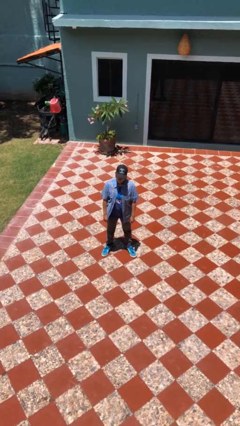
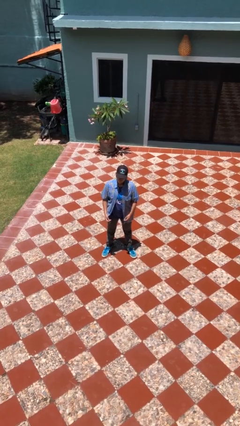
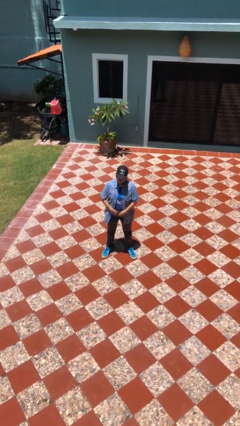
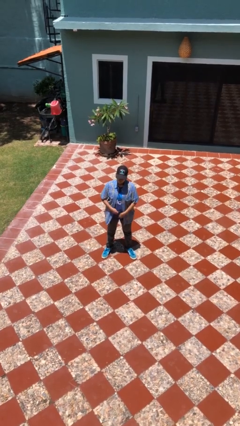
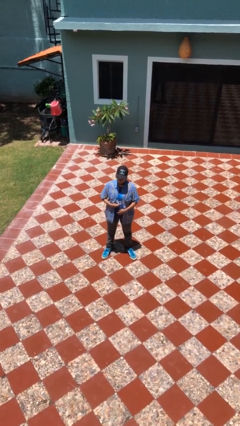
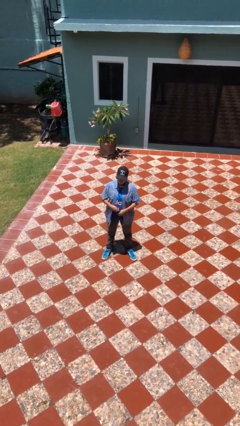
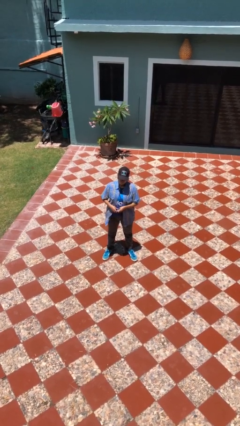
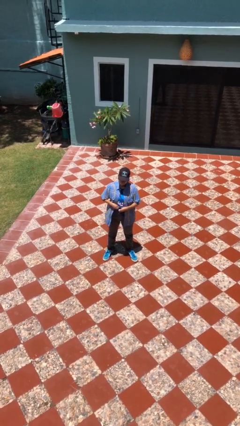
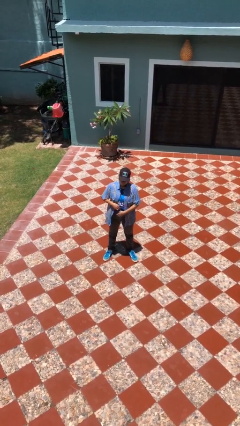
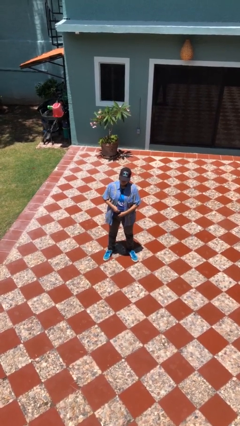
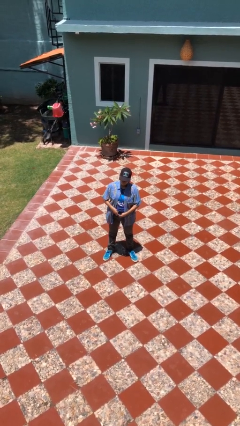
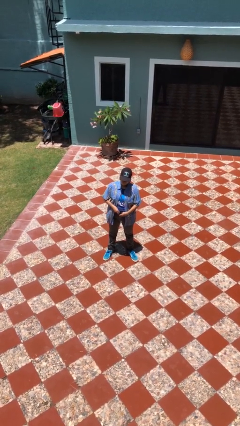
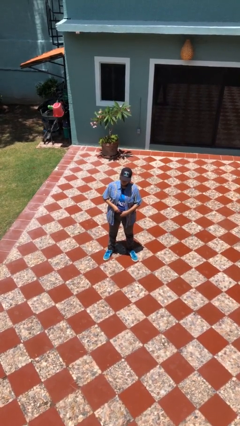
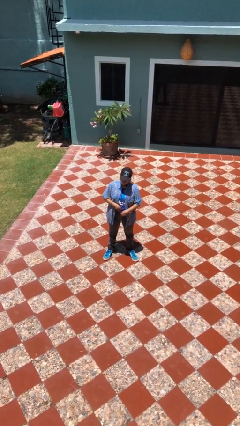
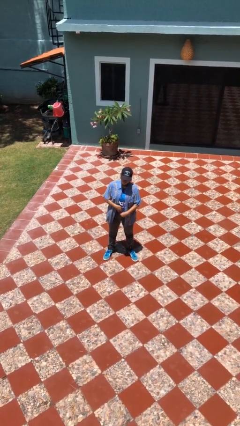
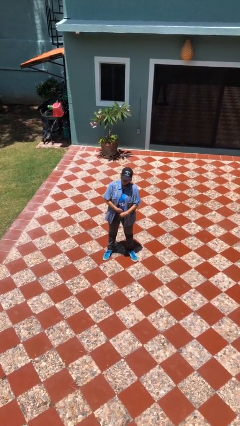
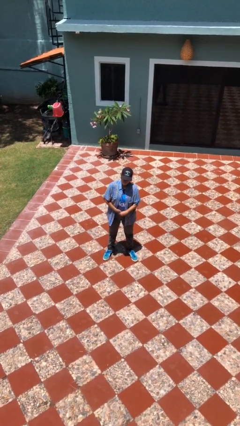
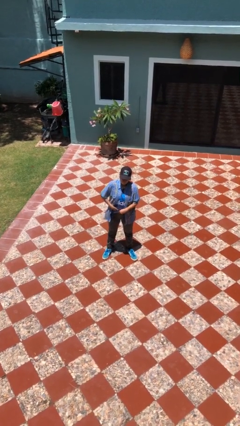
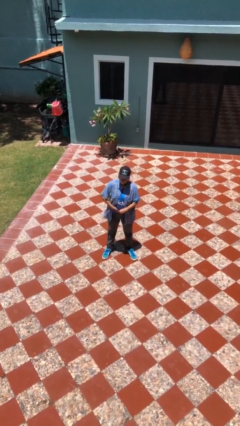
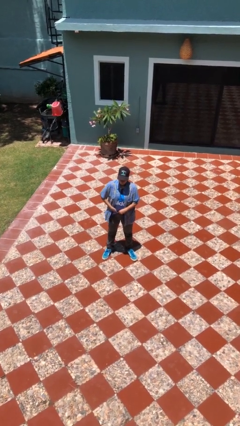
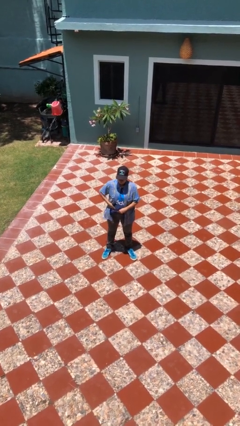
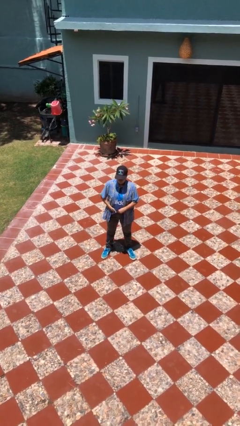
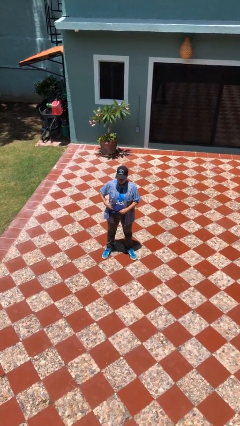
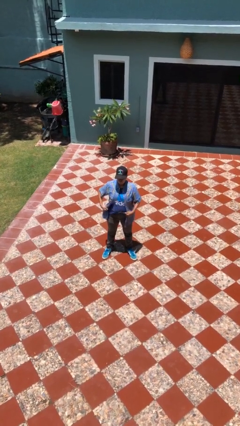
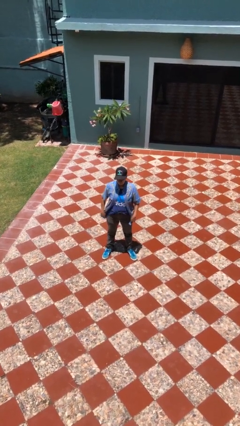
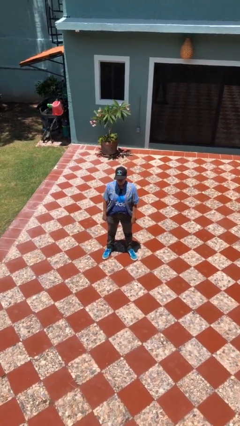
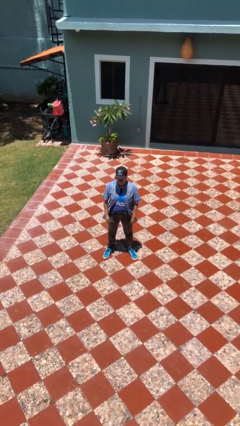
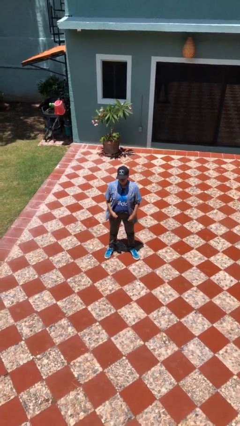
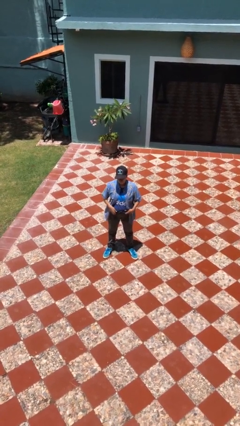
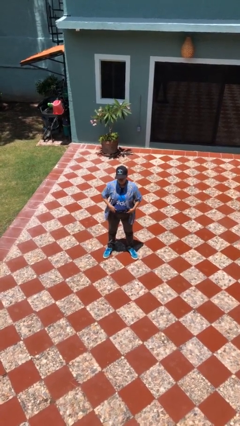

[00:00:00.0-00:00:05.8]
person tucks in shirt

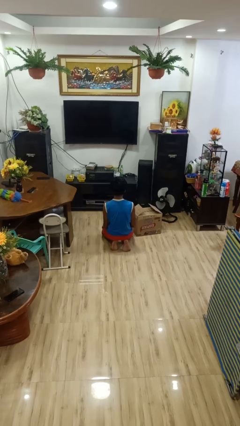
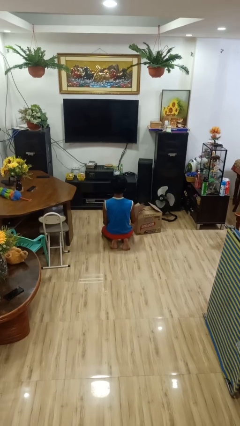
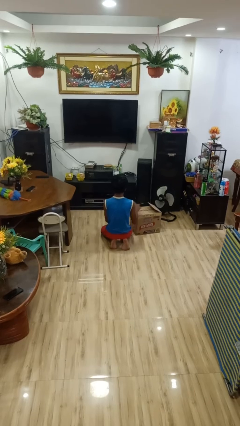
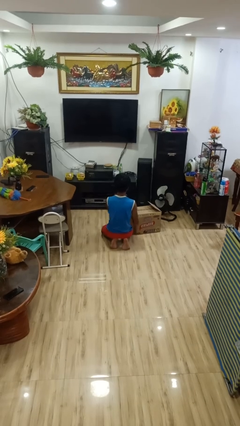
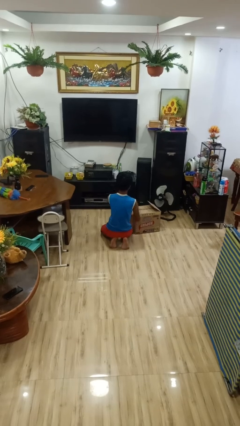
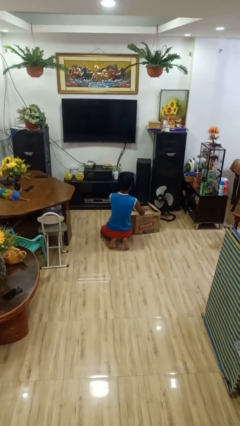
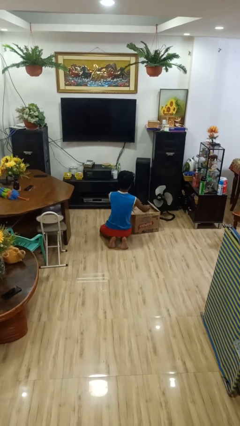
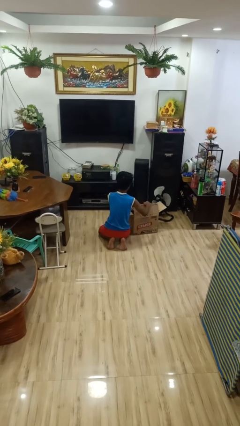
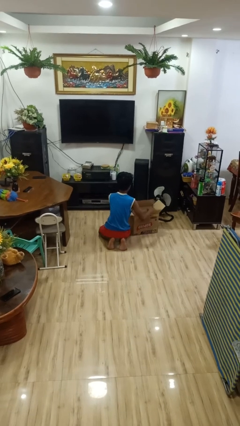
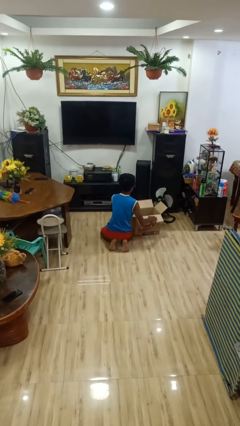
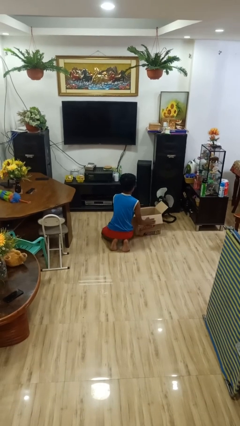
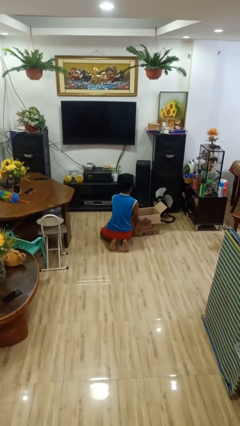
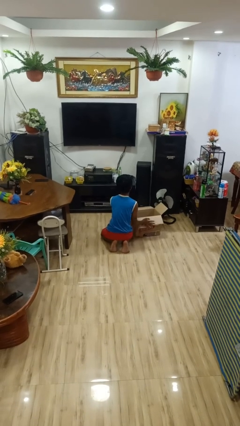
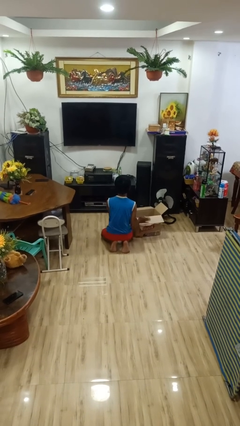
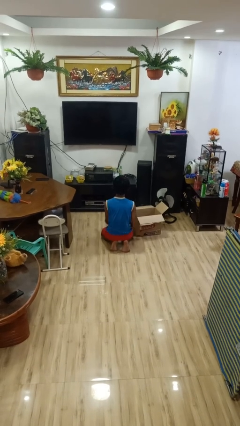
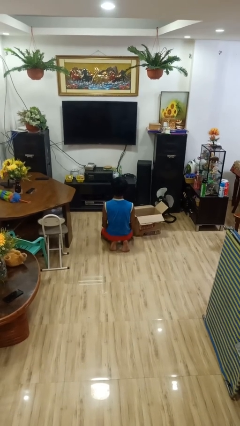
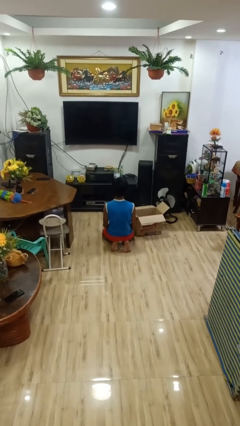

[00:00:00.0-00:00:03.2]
person opens box

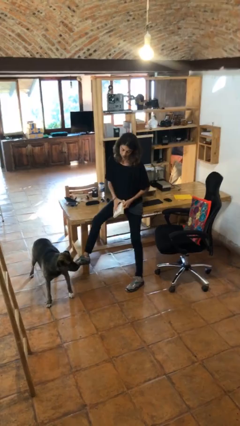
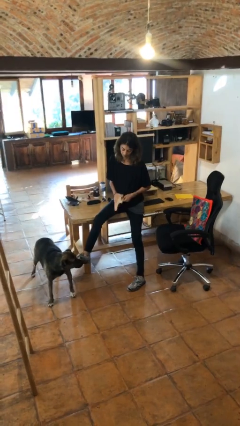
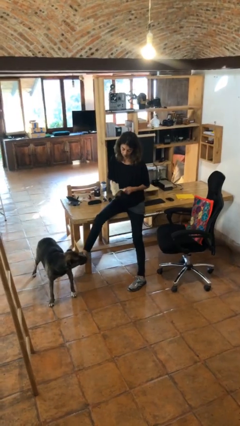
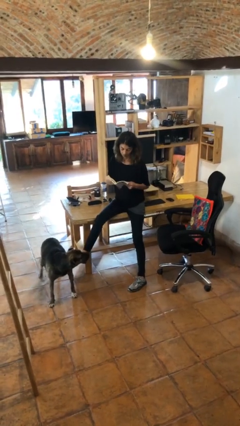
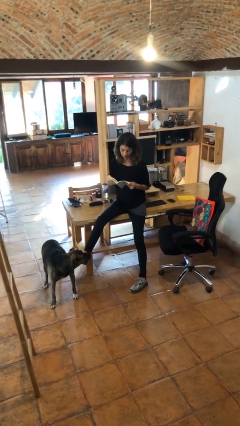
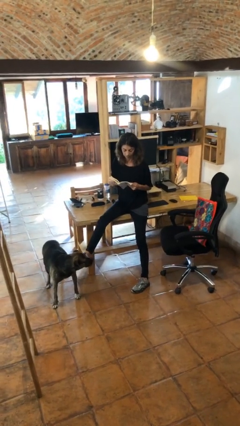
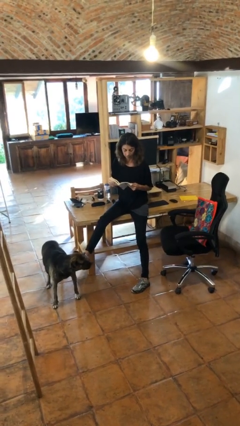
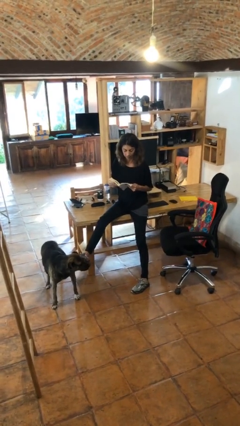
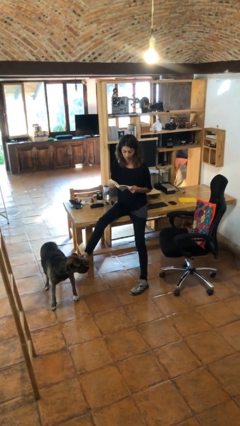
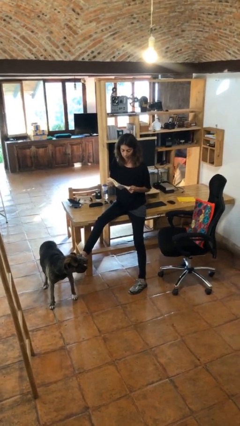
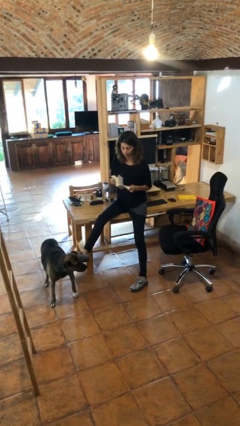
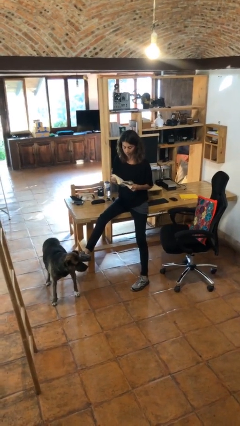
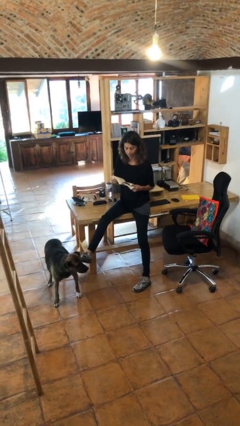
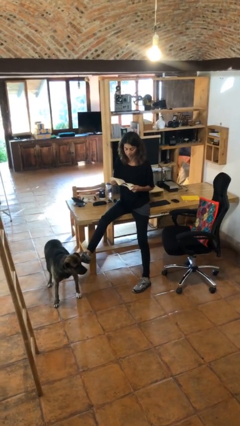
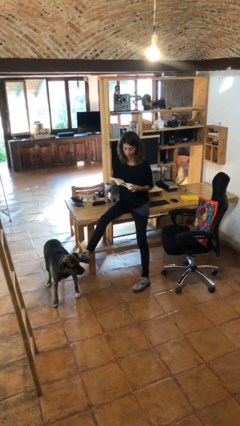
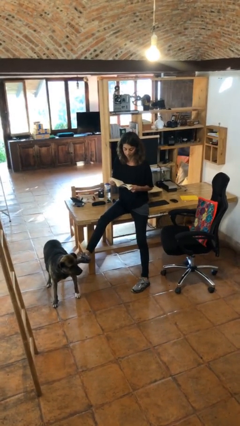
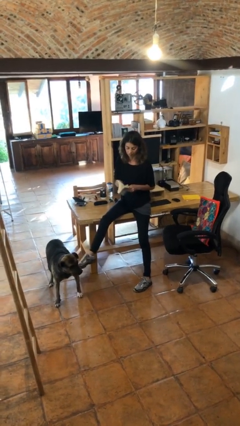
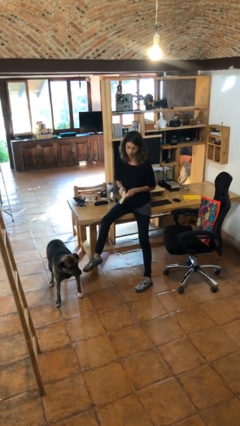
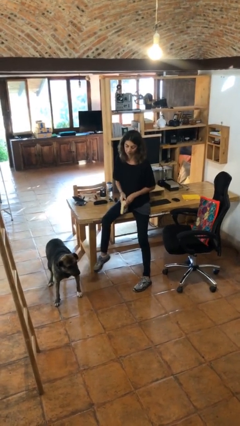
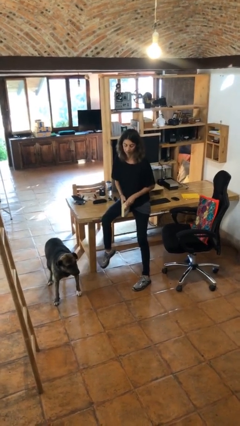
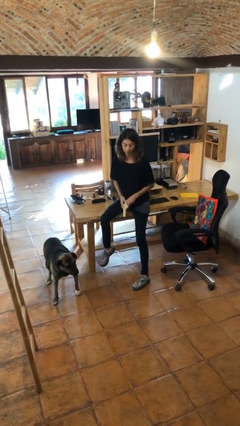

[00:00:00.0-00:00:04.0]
person reads book

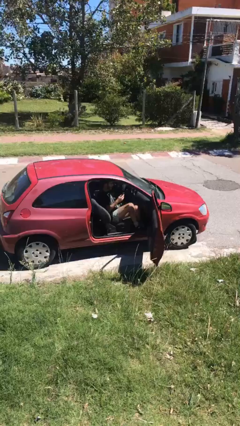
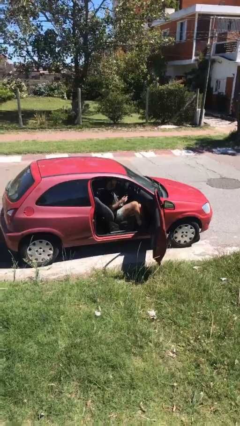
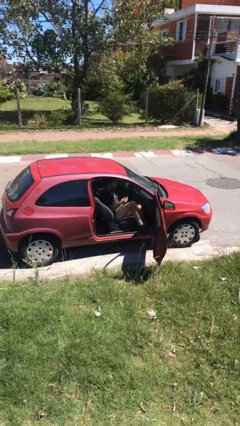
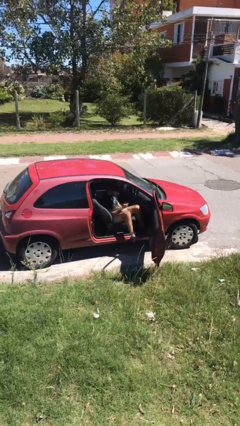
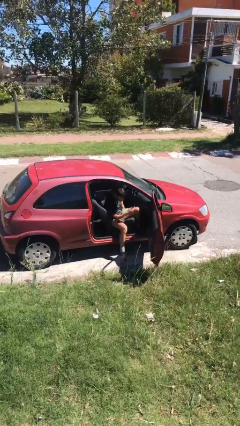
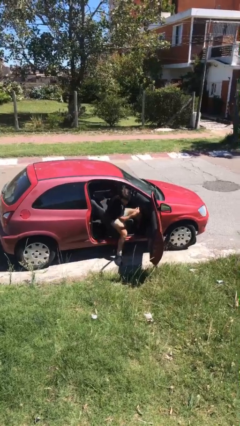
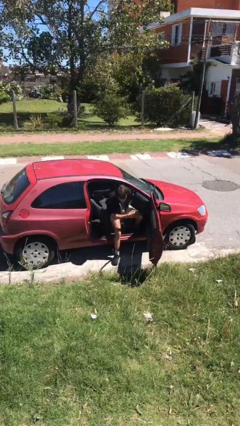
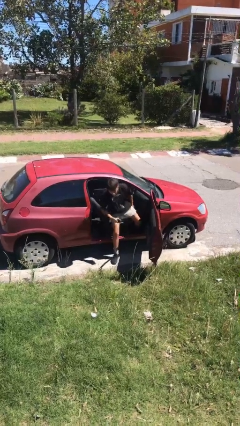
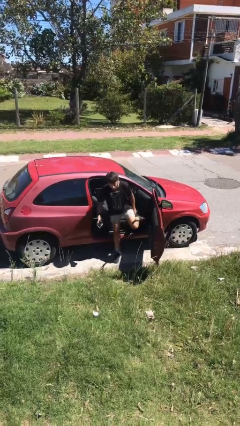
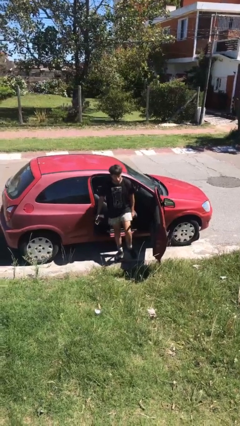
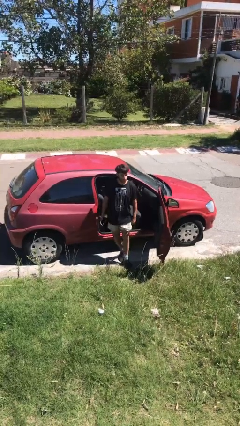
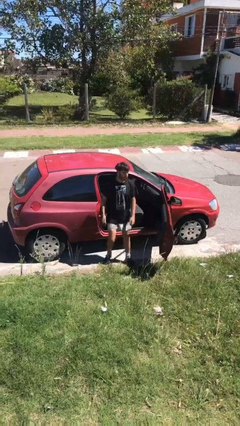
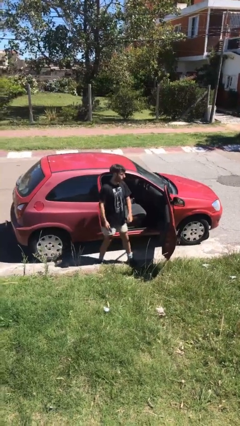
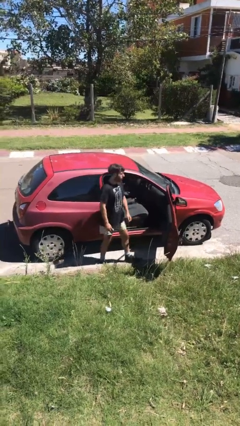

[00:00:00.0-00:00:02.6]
person exits car

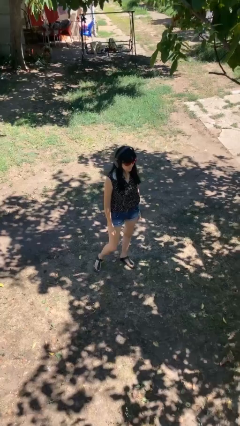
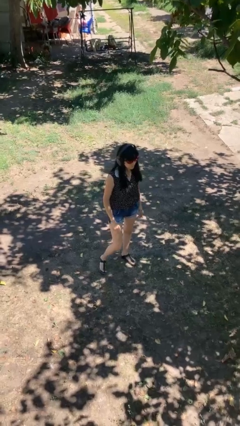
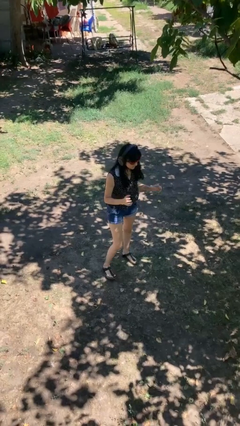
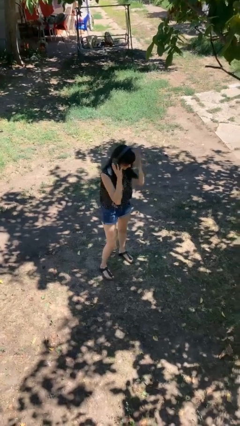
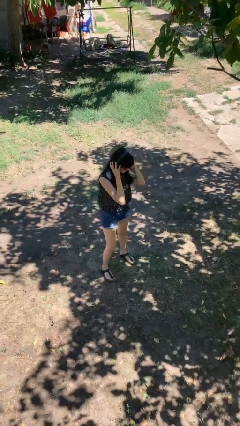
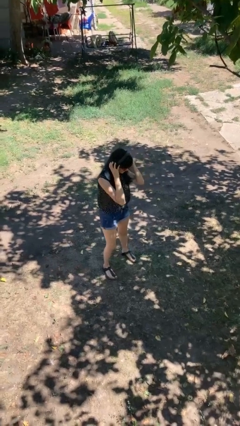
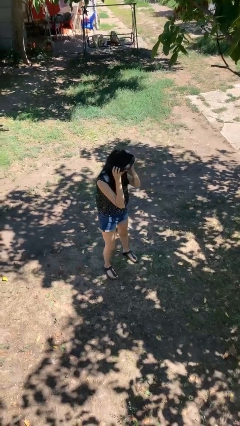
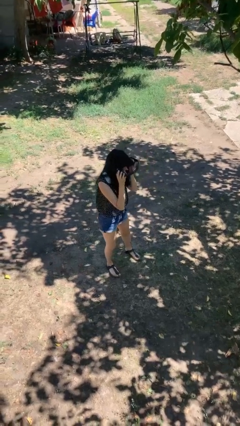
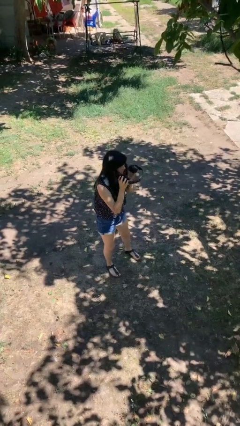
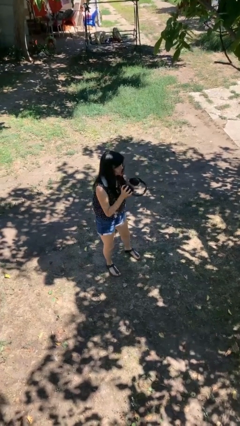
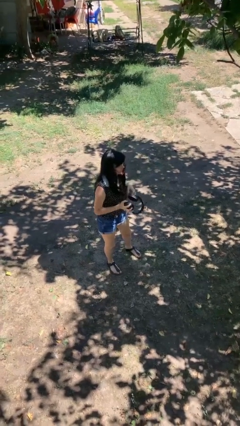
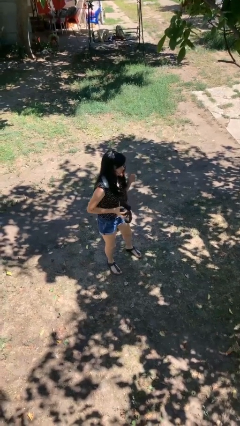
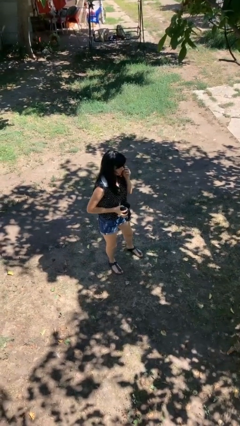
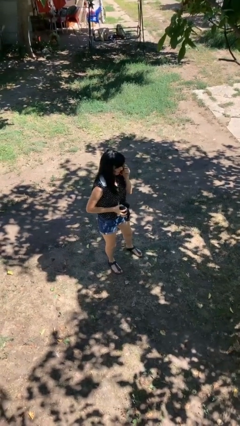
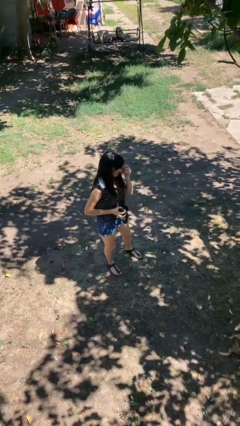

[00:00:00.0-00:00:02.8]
person takes off headphones
